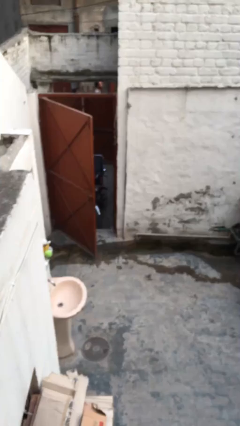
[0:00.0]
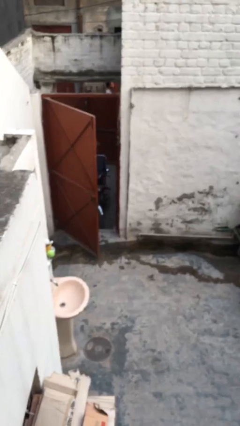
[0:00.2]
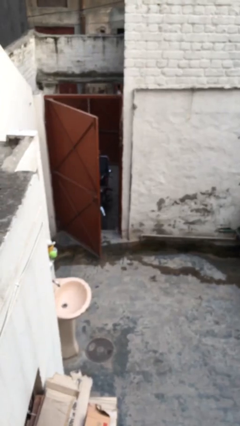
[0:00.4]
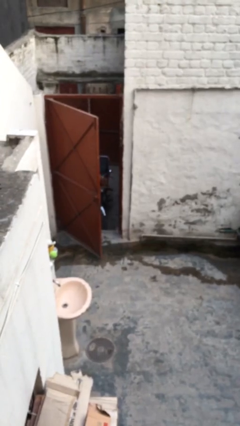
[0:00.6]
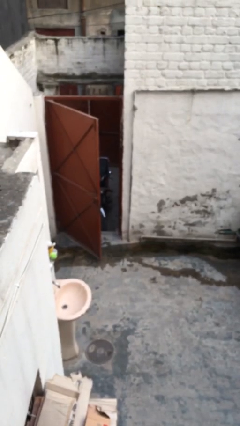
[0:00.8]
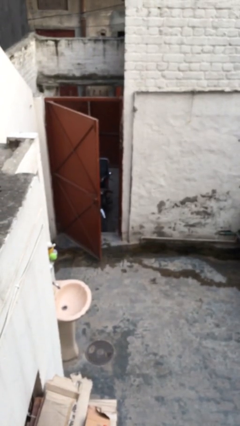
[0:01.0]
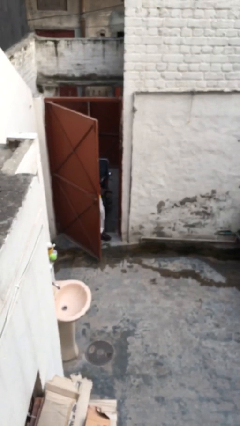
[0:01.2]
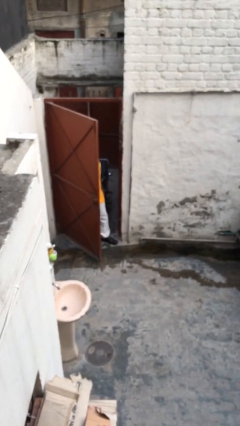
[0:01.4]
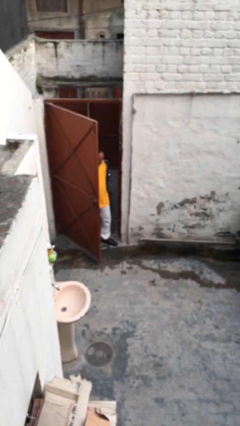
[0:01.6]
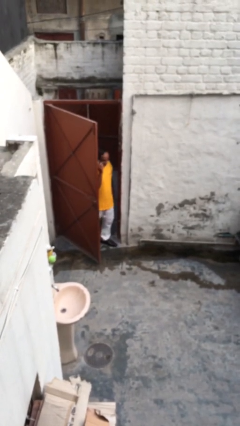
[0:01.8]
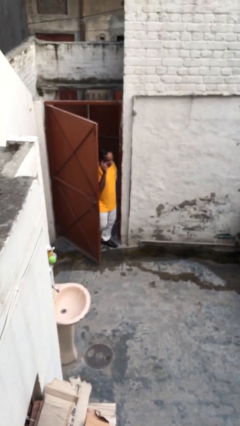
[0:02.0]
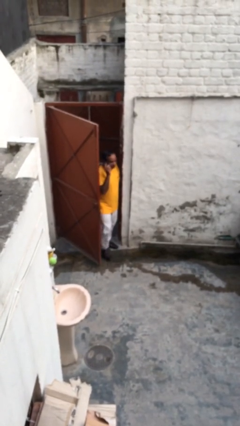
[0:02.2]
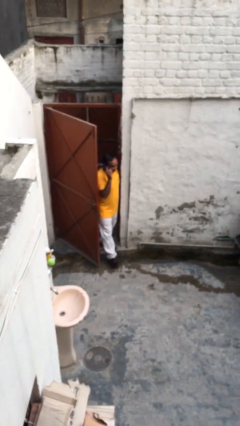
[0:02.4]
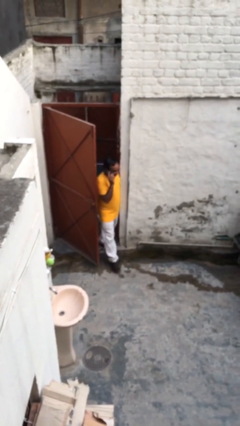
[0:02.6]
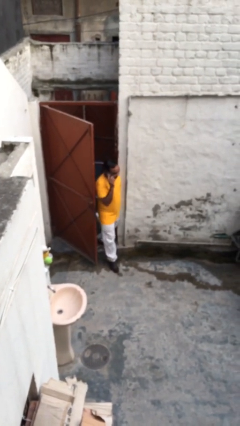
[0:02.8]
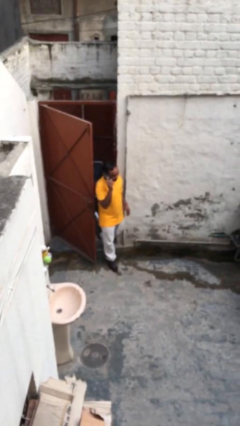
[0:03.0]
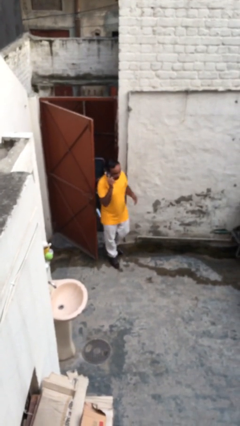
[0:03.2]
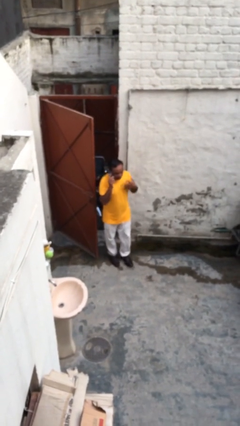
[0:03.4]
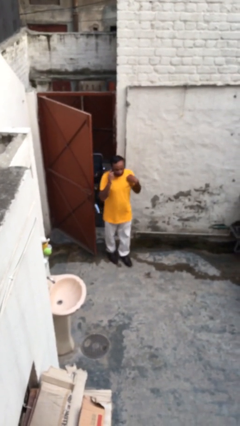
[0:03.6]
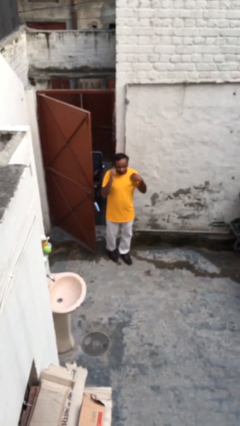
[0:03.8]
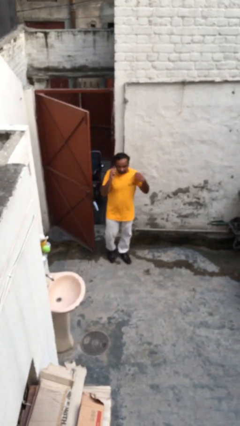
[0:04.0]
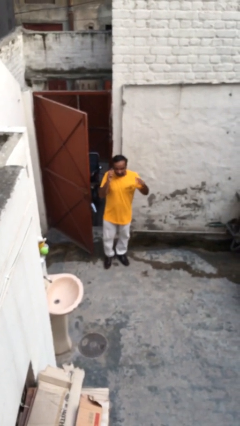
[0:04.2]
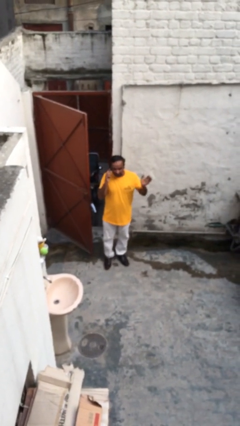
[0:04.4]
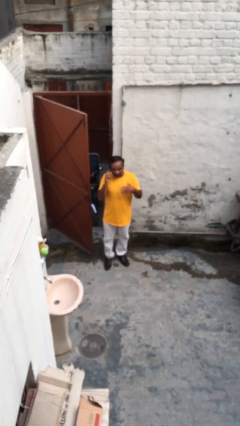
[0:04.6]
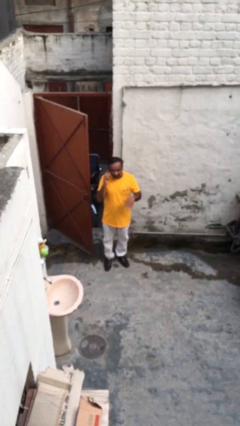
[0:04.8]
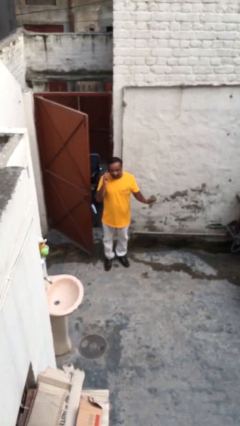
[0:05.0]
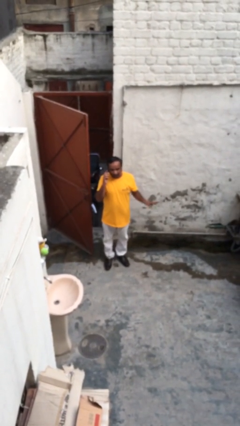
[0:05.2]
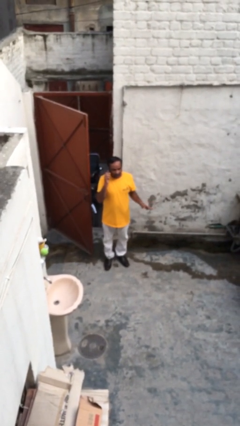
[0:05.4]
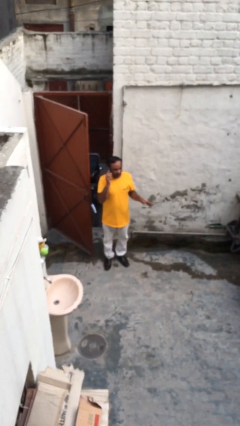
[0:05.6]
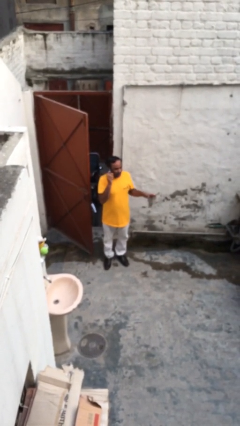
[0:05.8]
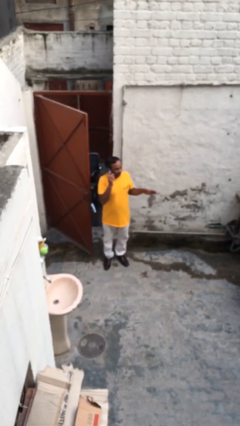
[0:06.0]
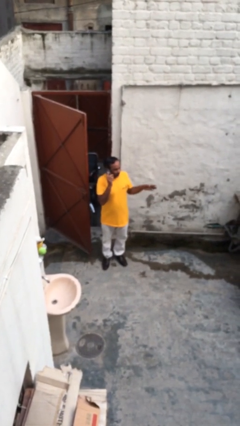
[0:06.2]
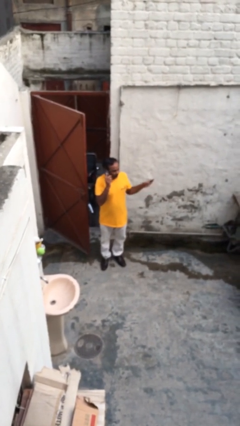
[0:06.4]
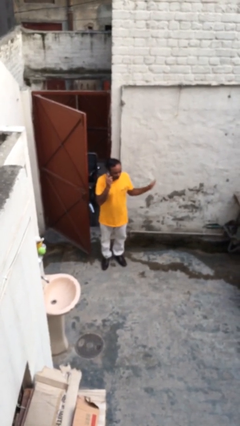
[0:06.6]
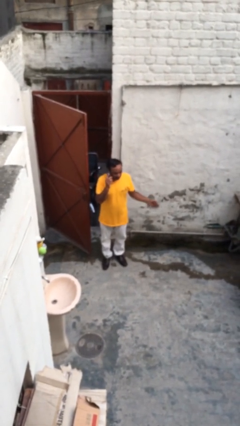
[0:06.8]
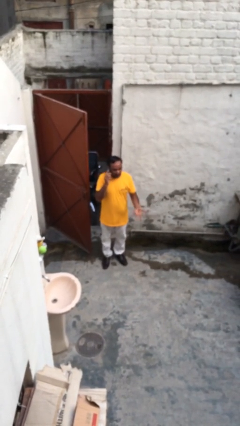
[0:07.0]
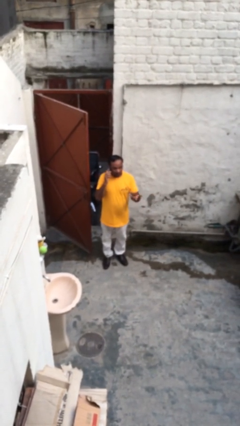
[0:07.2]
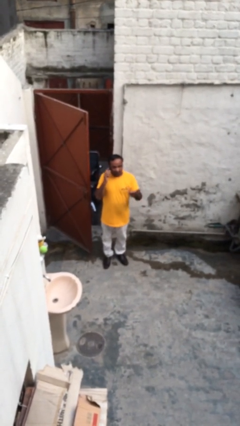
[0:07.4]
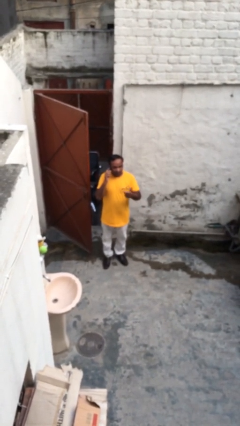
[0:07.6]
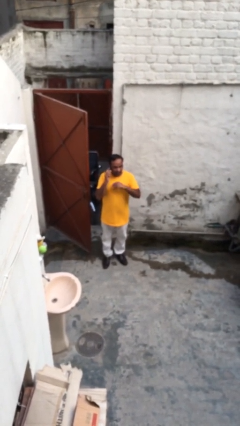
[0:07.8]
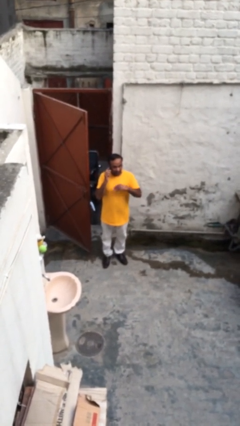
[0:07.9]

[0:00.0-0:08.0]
person enters scene through structure

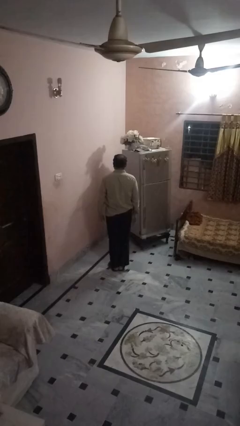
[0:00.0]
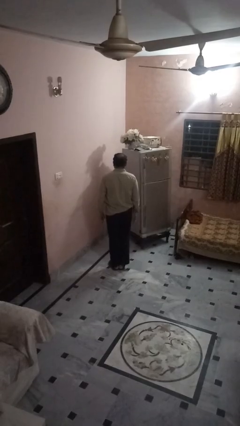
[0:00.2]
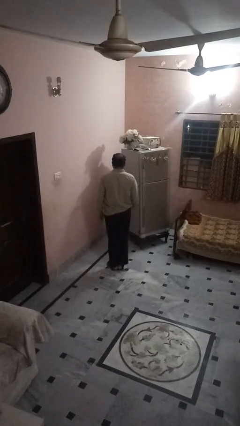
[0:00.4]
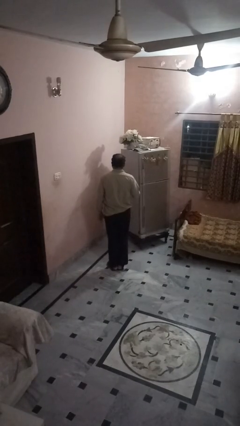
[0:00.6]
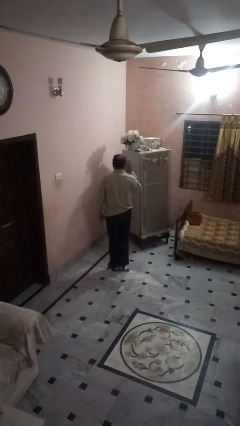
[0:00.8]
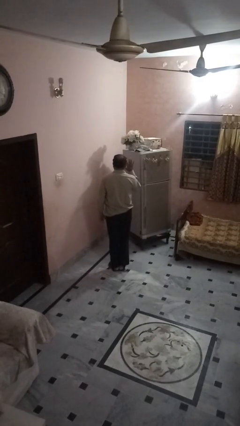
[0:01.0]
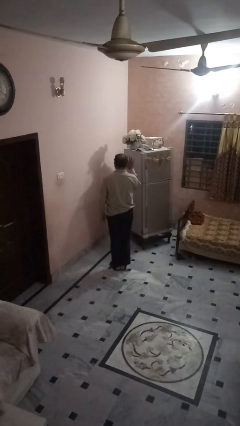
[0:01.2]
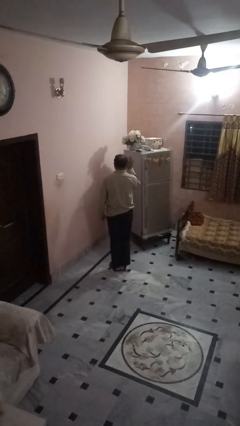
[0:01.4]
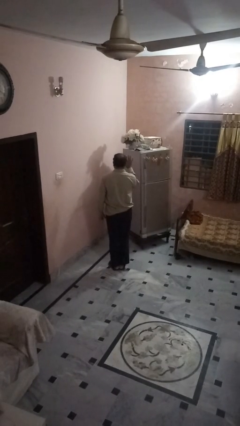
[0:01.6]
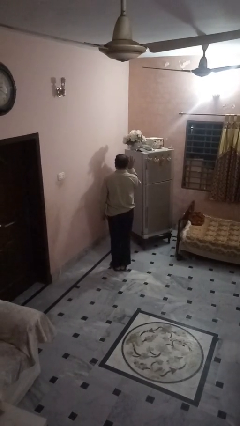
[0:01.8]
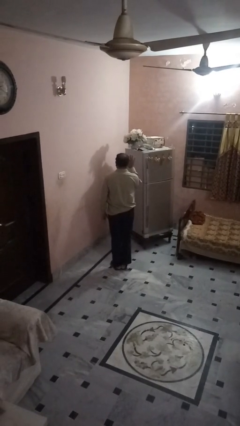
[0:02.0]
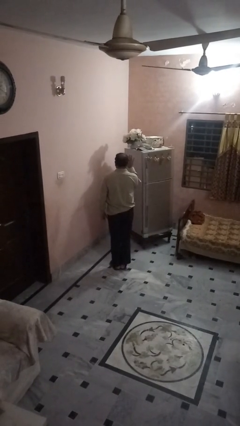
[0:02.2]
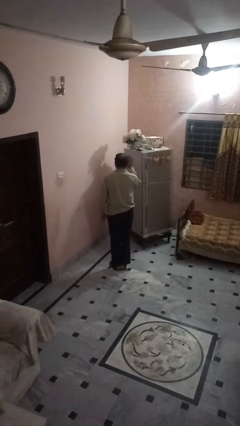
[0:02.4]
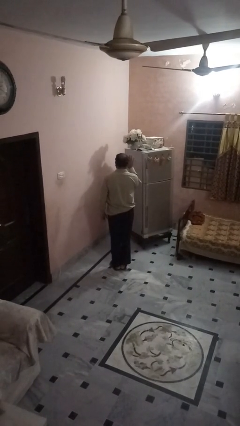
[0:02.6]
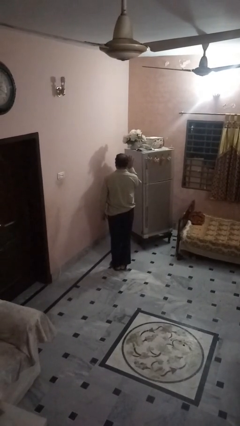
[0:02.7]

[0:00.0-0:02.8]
person gestures number five

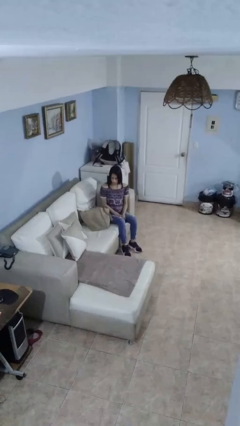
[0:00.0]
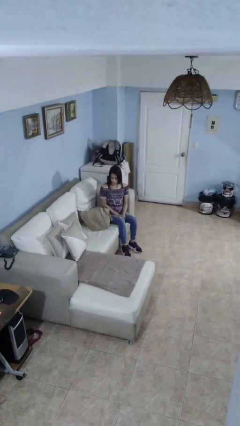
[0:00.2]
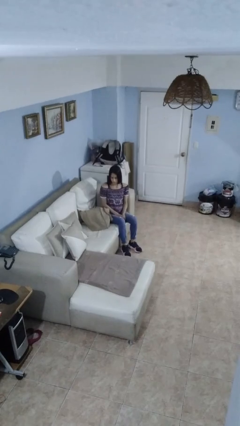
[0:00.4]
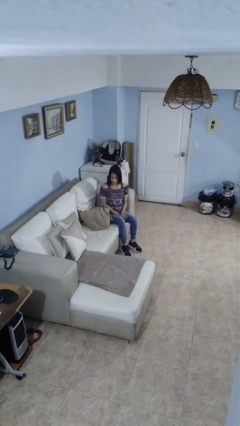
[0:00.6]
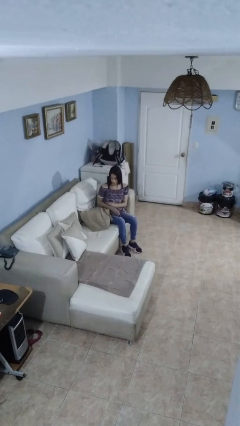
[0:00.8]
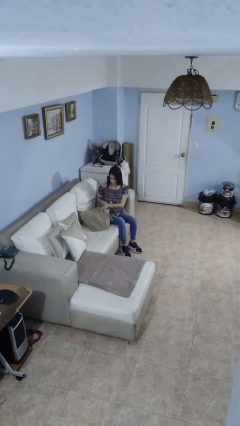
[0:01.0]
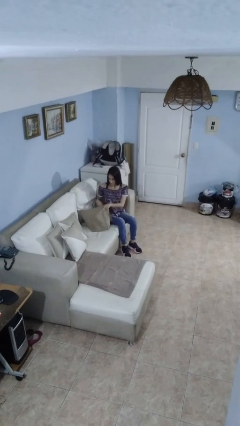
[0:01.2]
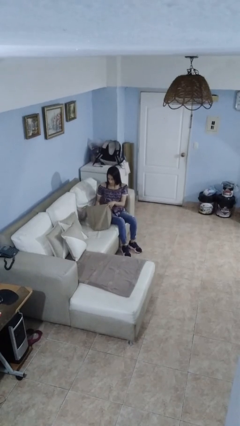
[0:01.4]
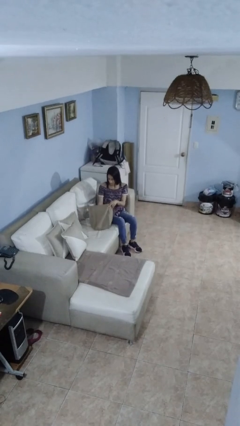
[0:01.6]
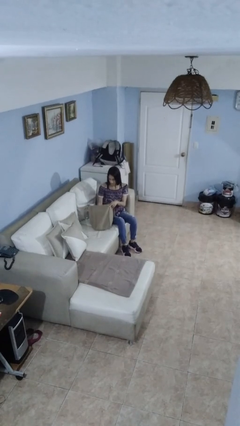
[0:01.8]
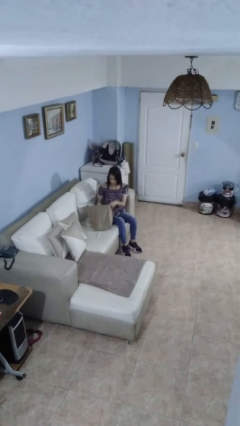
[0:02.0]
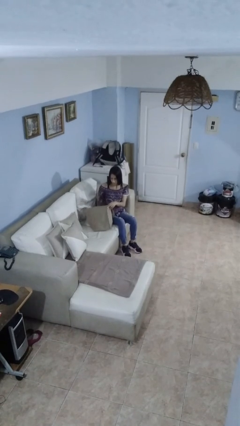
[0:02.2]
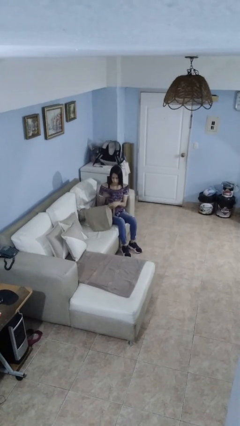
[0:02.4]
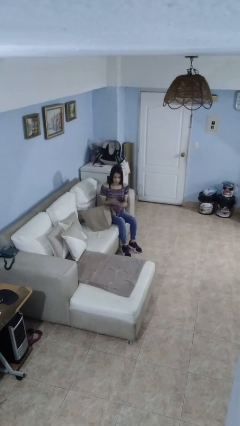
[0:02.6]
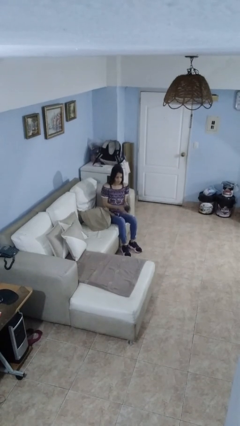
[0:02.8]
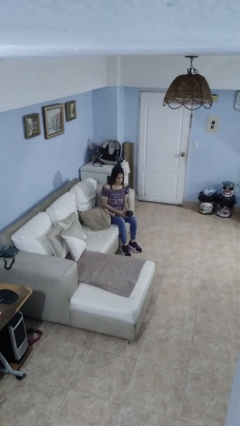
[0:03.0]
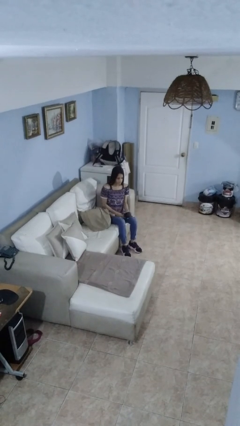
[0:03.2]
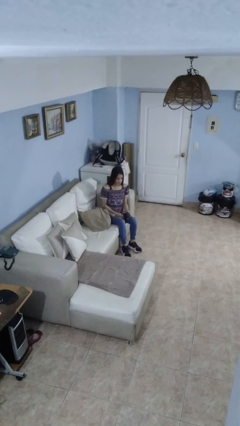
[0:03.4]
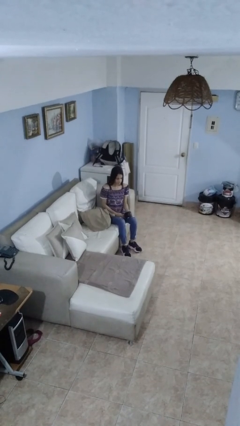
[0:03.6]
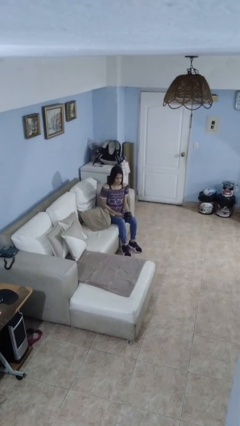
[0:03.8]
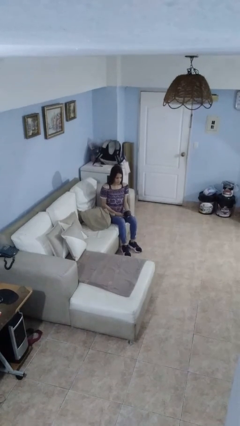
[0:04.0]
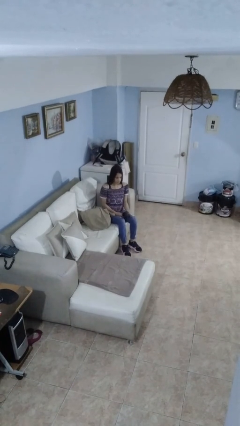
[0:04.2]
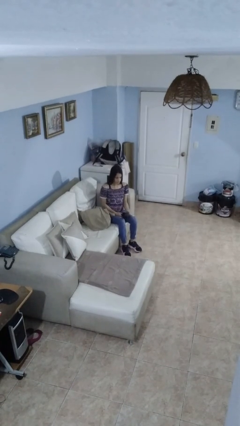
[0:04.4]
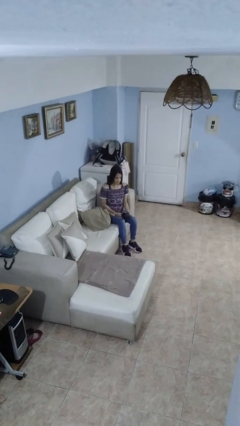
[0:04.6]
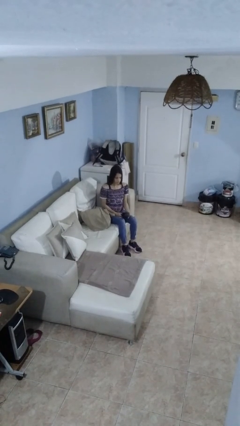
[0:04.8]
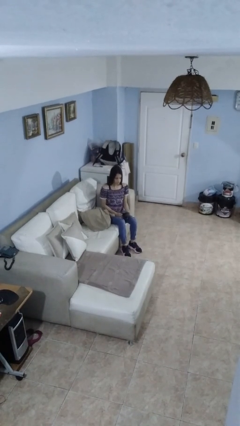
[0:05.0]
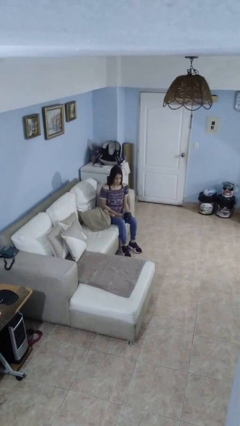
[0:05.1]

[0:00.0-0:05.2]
person takes object from bag

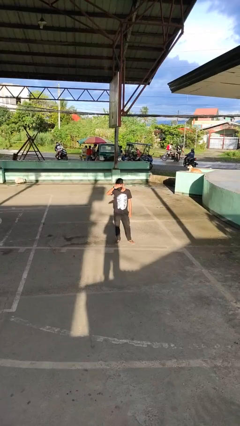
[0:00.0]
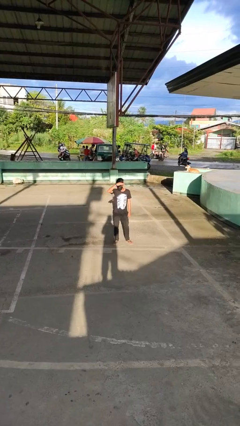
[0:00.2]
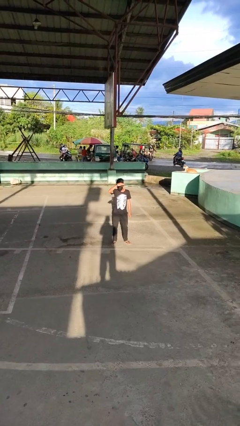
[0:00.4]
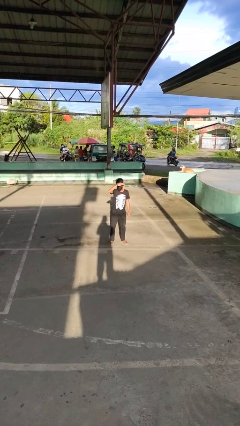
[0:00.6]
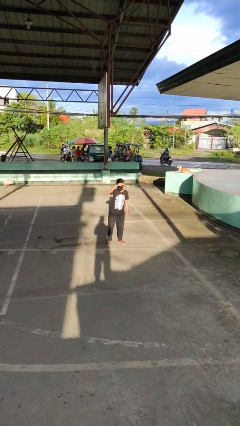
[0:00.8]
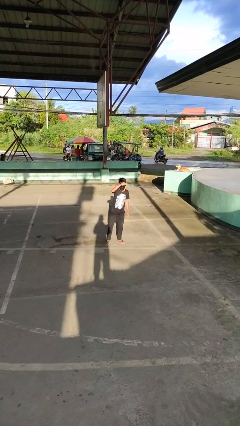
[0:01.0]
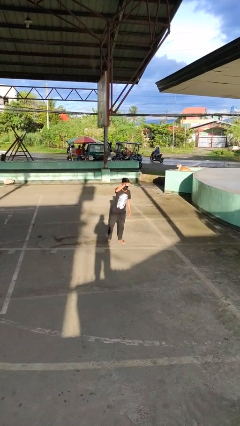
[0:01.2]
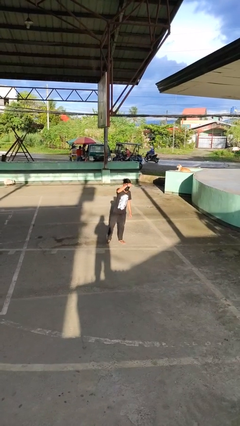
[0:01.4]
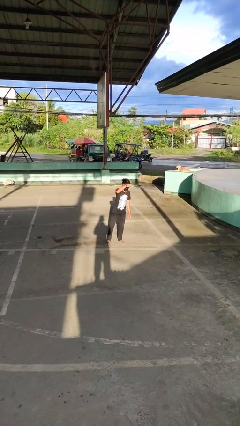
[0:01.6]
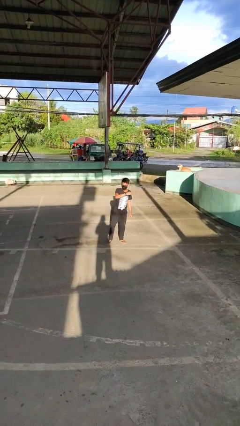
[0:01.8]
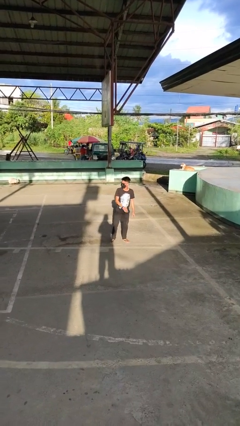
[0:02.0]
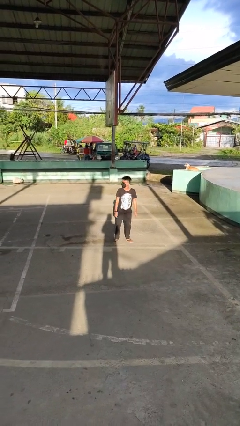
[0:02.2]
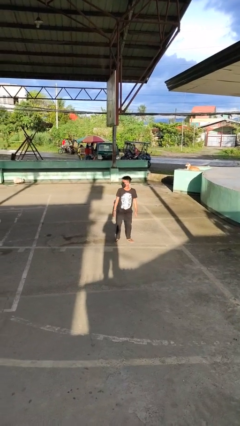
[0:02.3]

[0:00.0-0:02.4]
person shades eyes
